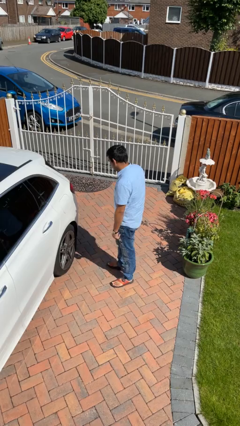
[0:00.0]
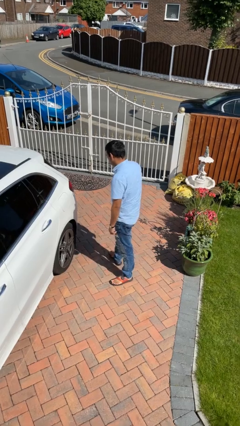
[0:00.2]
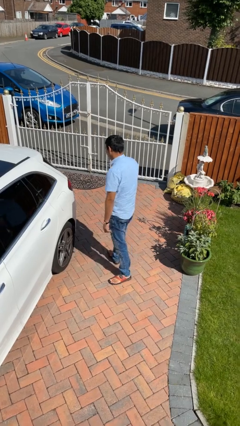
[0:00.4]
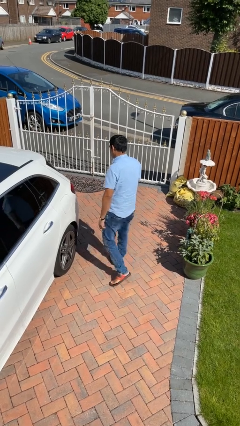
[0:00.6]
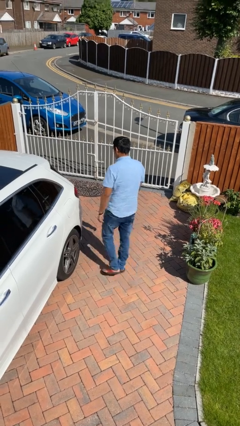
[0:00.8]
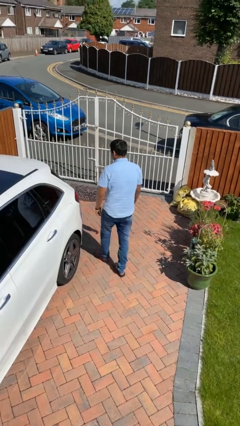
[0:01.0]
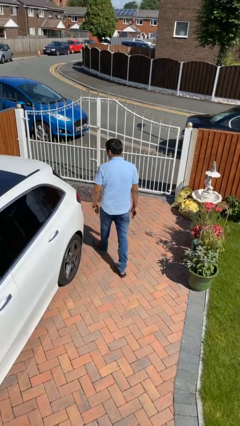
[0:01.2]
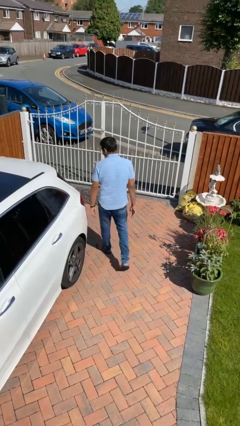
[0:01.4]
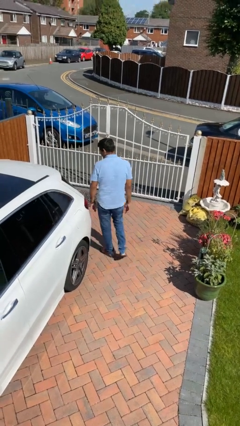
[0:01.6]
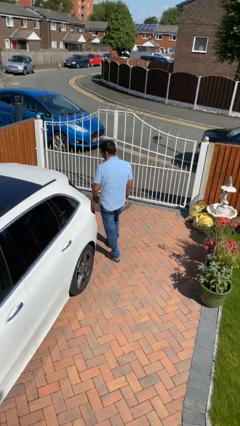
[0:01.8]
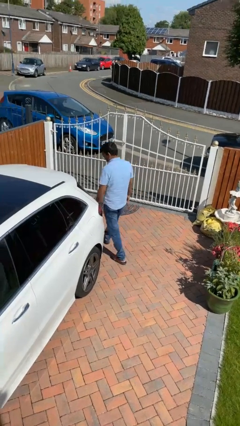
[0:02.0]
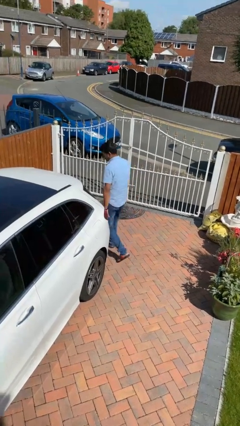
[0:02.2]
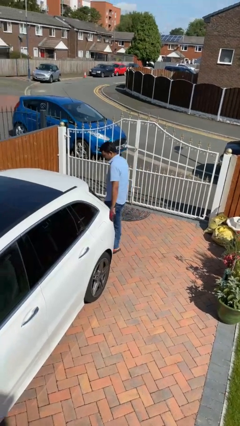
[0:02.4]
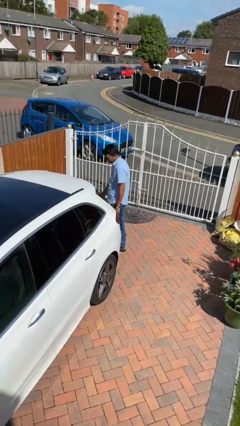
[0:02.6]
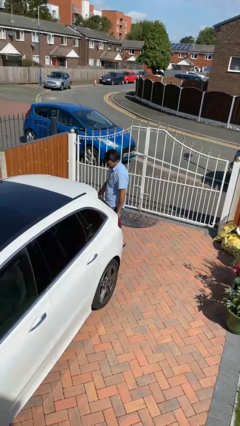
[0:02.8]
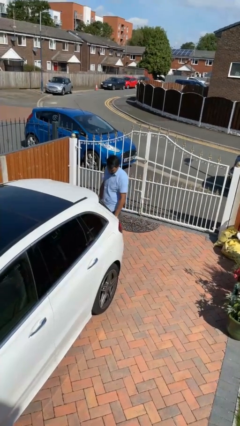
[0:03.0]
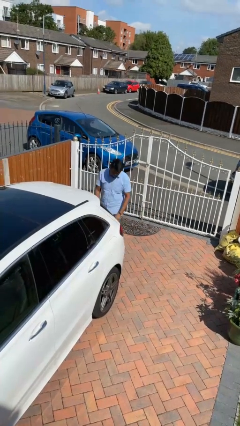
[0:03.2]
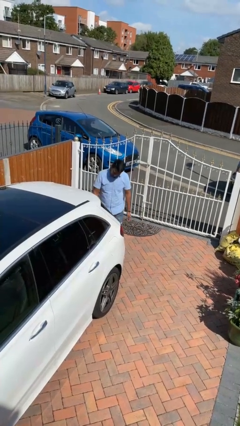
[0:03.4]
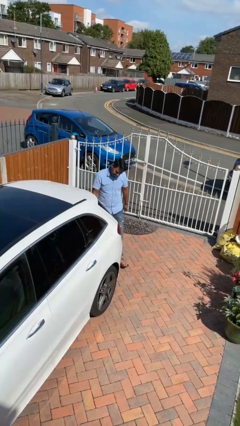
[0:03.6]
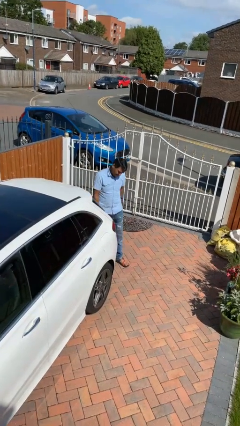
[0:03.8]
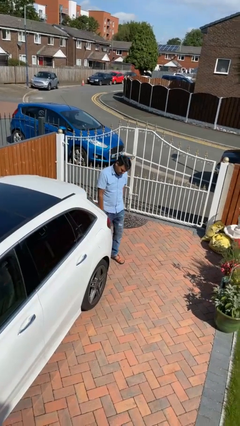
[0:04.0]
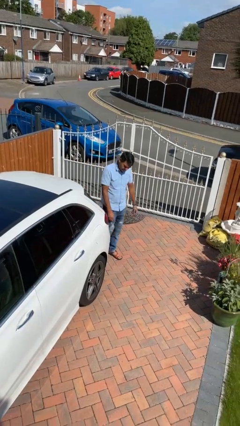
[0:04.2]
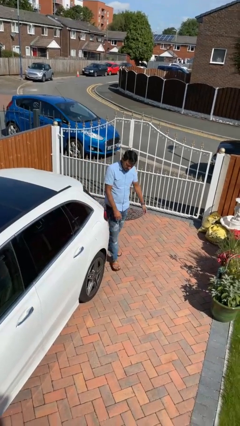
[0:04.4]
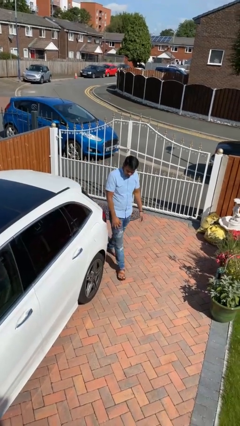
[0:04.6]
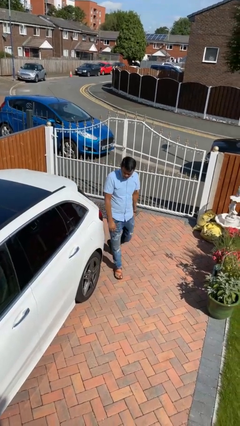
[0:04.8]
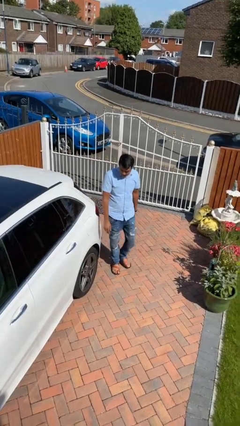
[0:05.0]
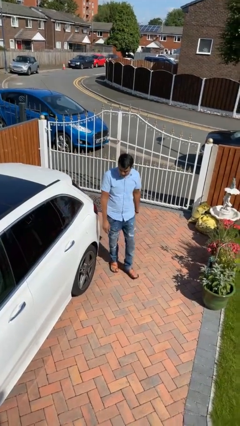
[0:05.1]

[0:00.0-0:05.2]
person walks around car

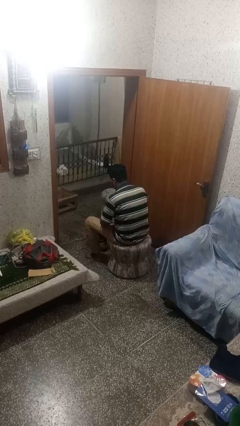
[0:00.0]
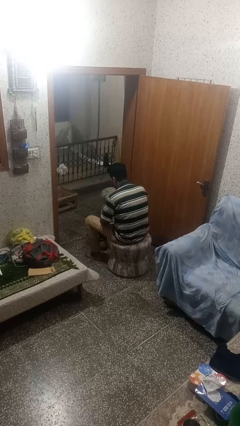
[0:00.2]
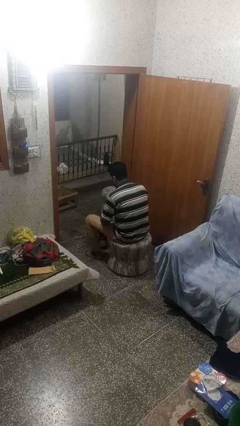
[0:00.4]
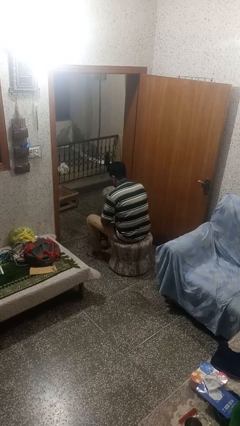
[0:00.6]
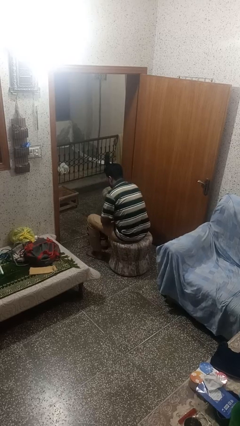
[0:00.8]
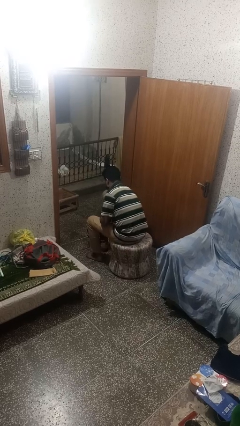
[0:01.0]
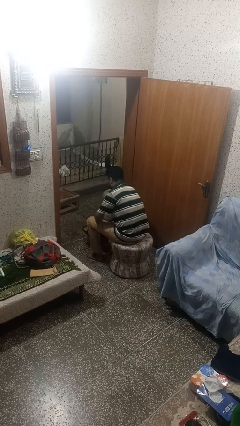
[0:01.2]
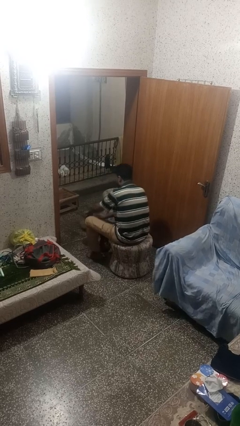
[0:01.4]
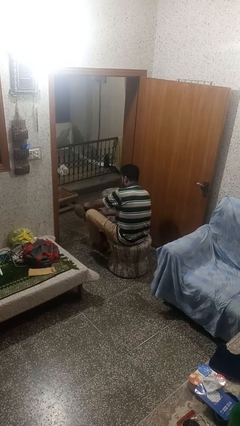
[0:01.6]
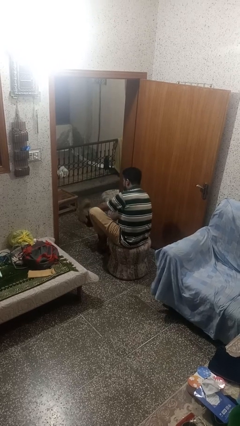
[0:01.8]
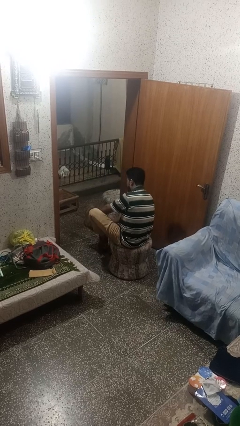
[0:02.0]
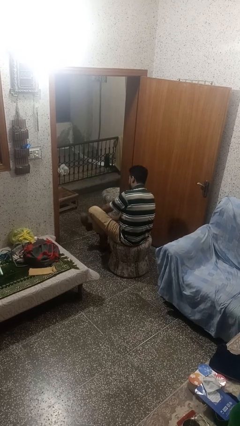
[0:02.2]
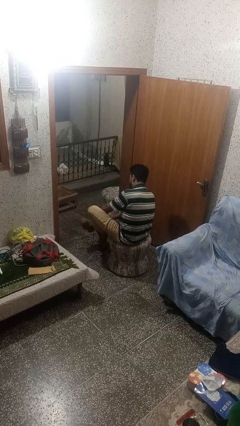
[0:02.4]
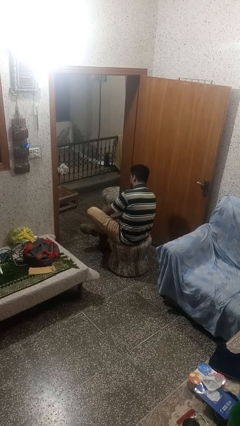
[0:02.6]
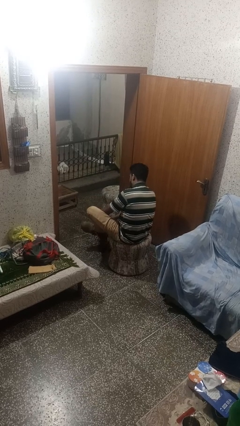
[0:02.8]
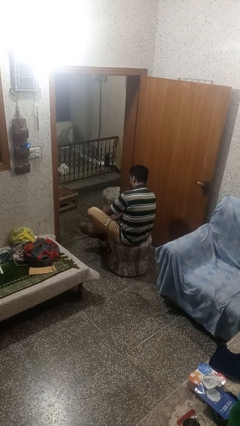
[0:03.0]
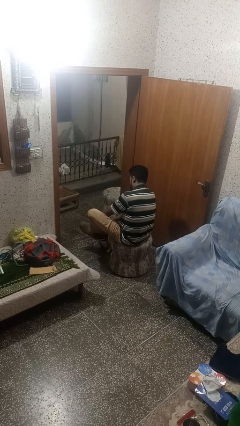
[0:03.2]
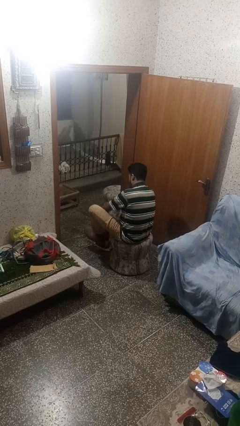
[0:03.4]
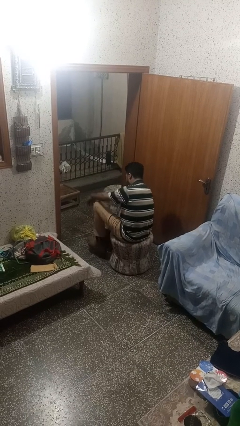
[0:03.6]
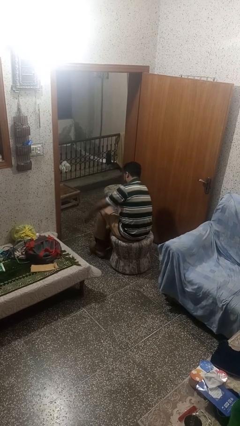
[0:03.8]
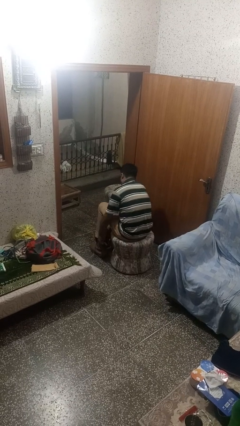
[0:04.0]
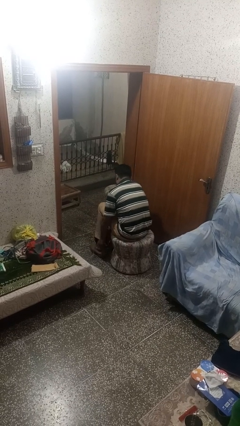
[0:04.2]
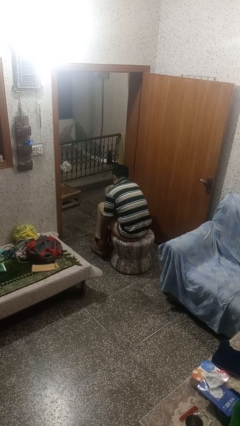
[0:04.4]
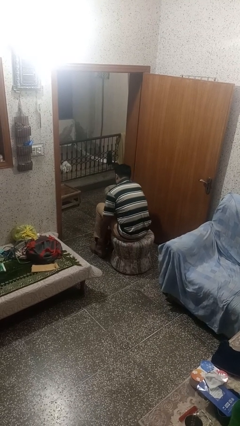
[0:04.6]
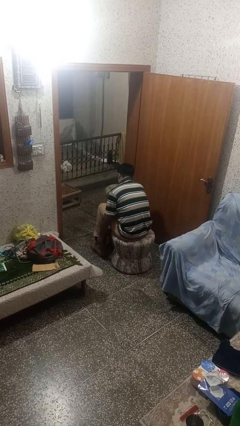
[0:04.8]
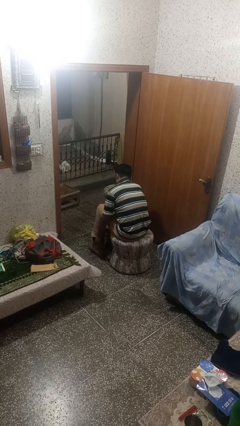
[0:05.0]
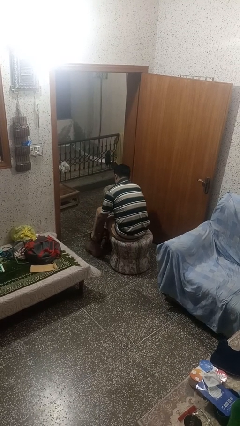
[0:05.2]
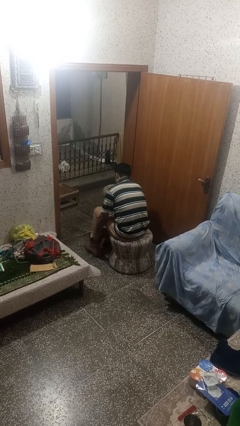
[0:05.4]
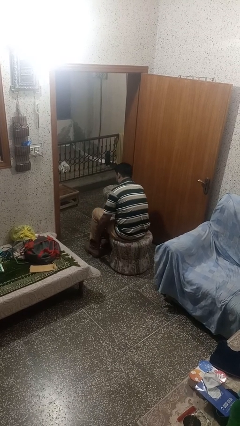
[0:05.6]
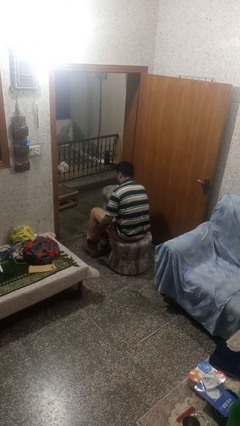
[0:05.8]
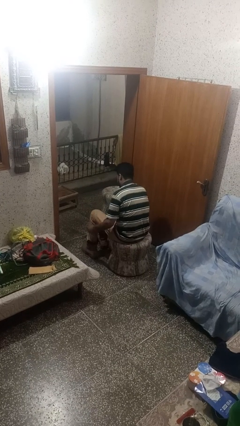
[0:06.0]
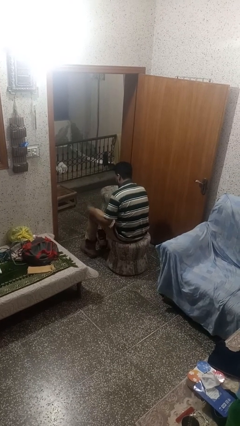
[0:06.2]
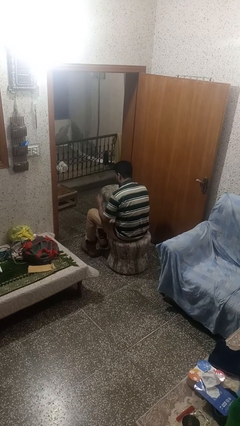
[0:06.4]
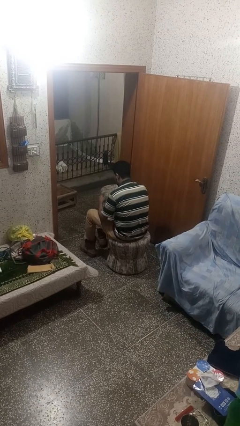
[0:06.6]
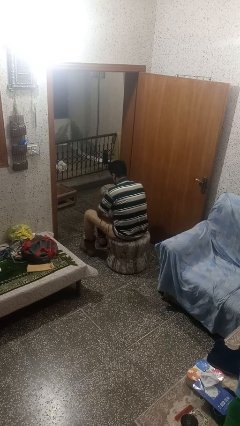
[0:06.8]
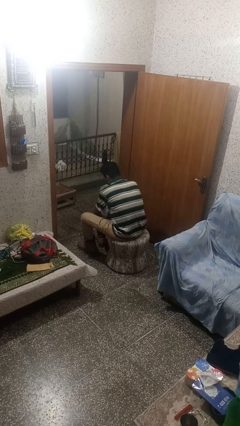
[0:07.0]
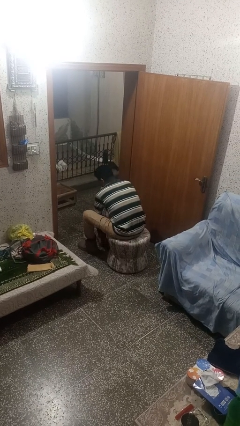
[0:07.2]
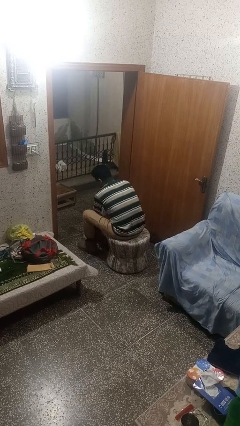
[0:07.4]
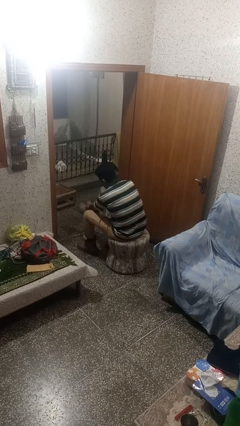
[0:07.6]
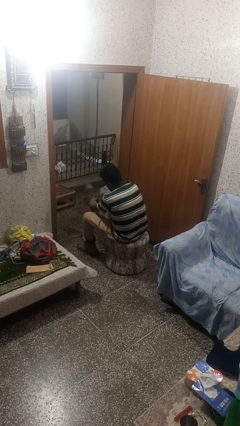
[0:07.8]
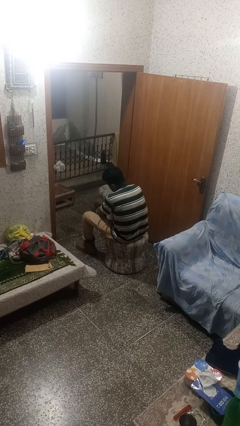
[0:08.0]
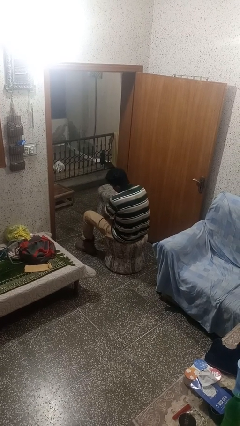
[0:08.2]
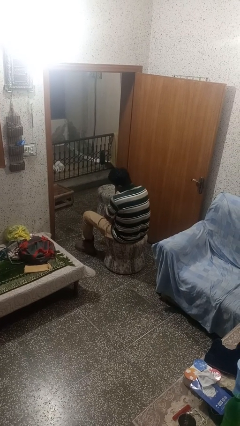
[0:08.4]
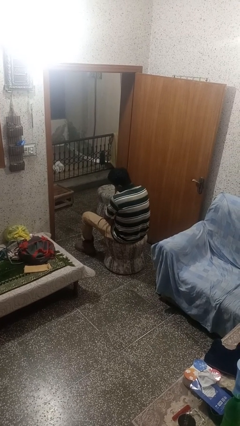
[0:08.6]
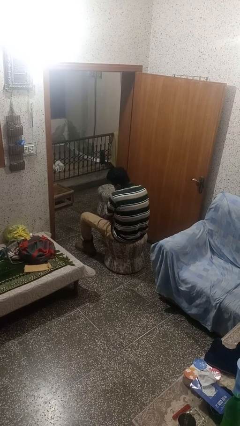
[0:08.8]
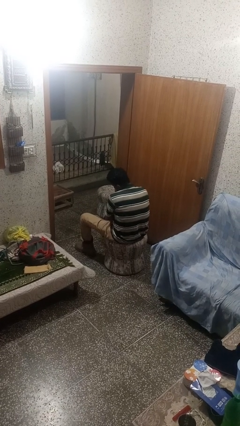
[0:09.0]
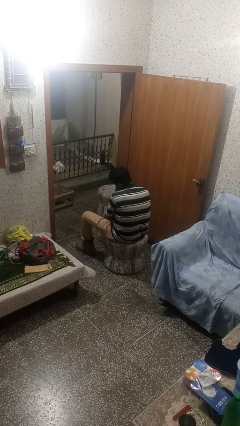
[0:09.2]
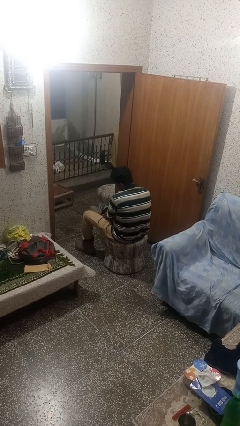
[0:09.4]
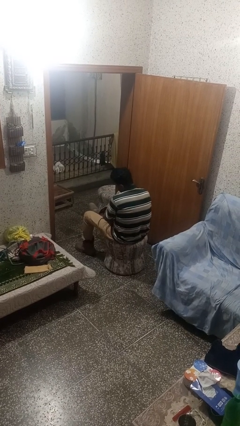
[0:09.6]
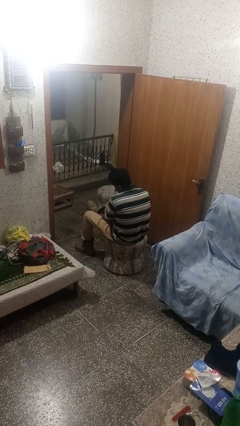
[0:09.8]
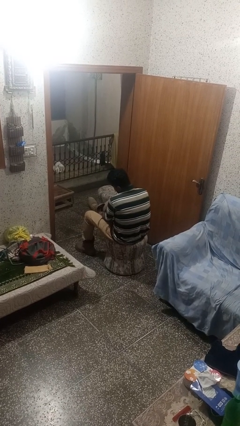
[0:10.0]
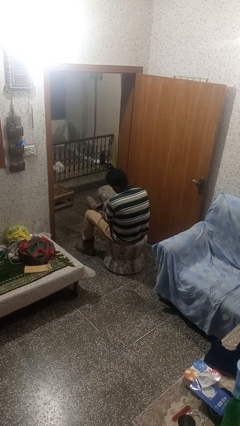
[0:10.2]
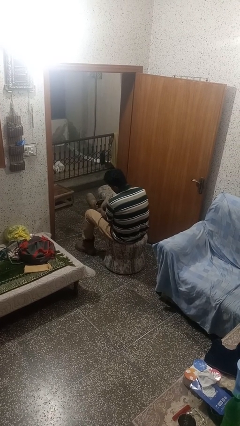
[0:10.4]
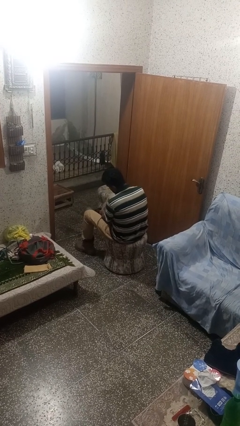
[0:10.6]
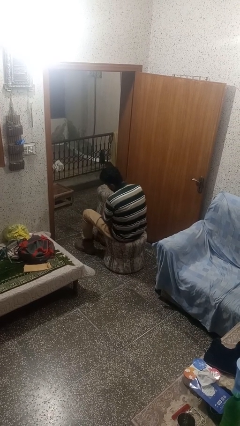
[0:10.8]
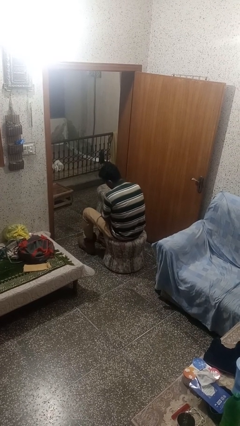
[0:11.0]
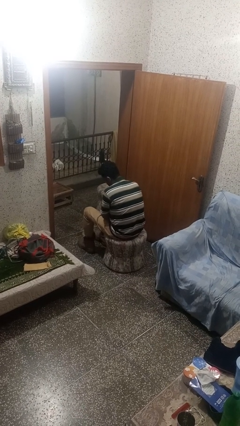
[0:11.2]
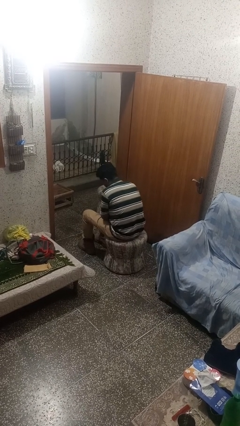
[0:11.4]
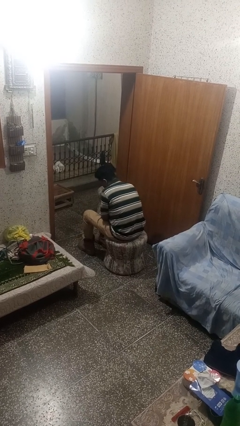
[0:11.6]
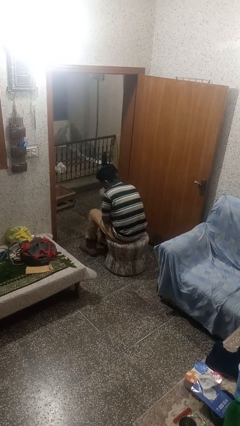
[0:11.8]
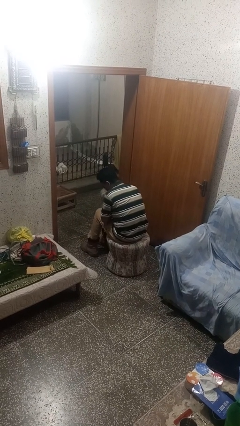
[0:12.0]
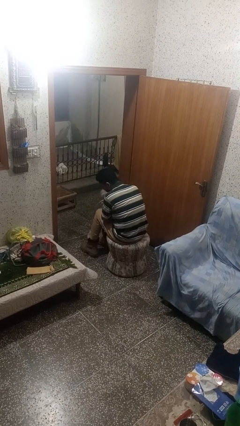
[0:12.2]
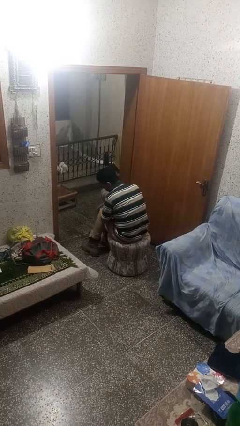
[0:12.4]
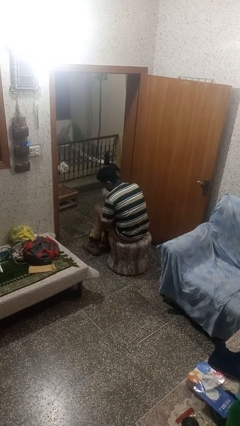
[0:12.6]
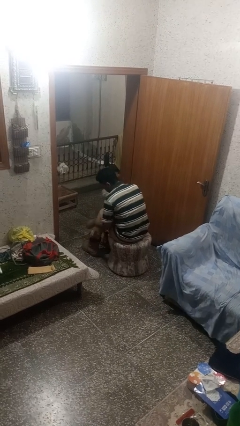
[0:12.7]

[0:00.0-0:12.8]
person puts on shoes
